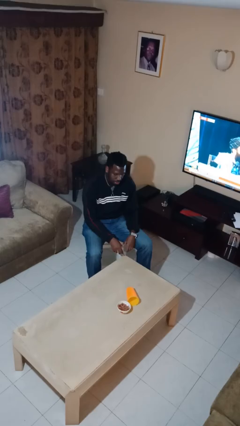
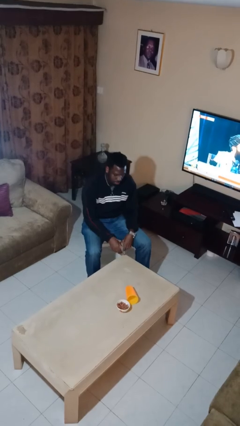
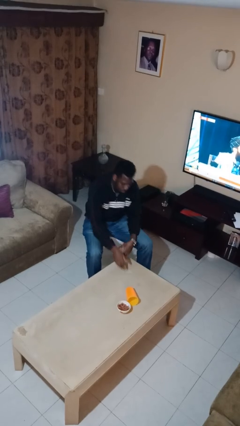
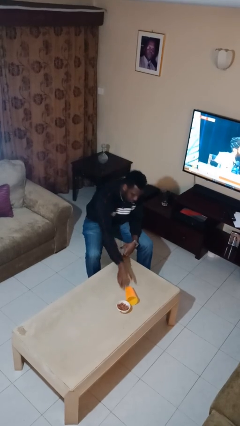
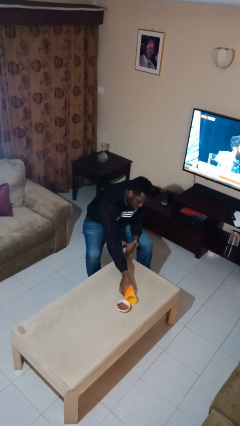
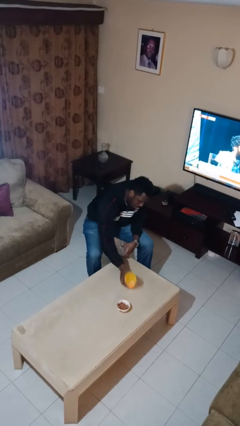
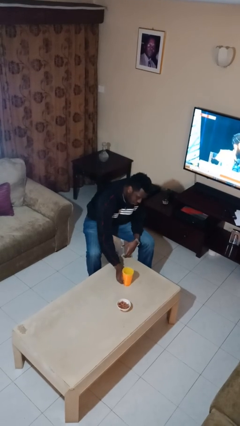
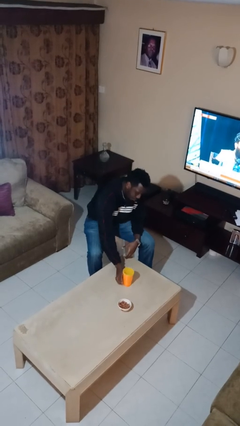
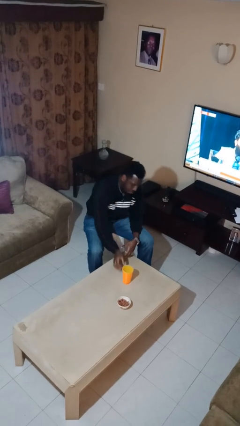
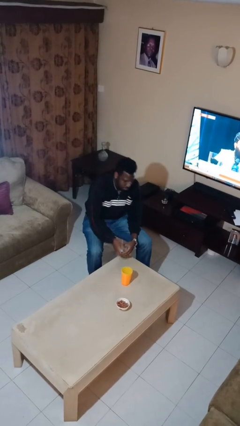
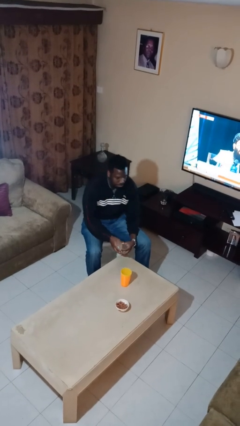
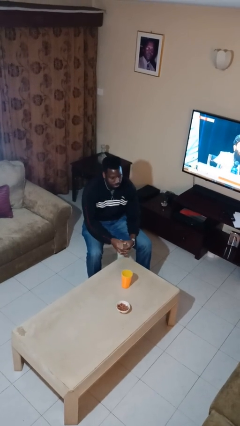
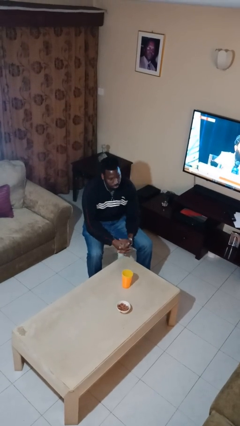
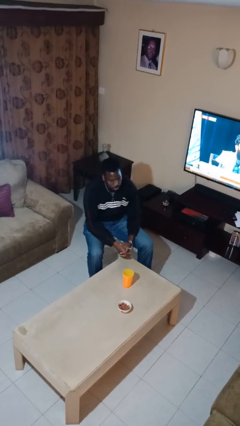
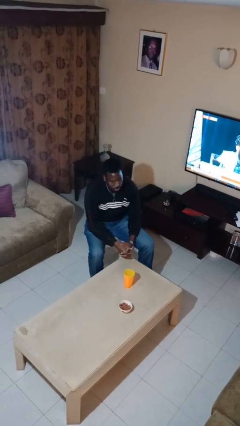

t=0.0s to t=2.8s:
person sets upright glass

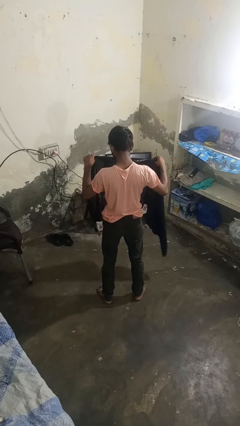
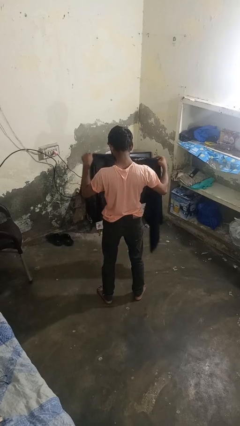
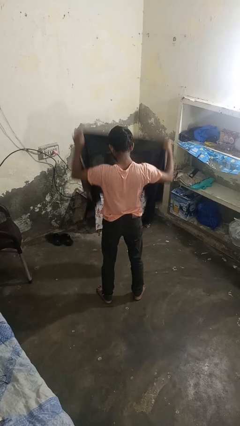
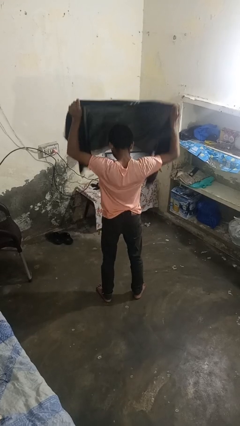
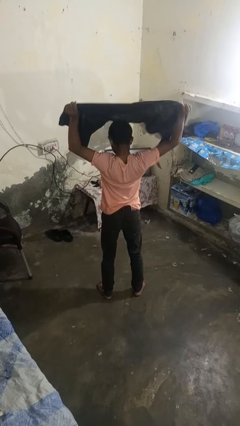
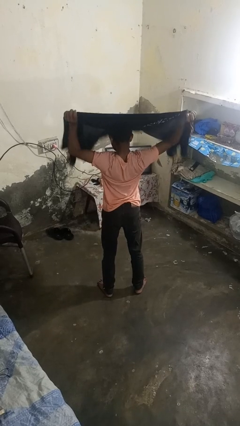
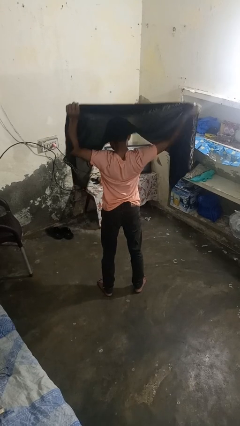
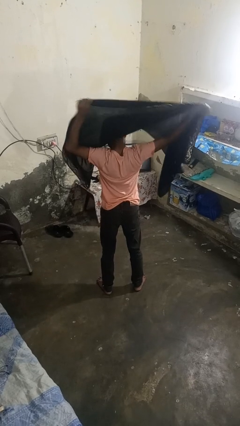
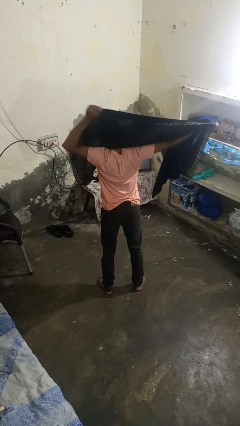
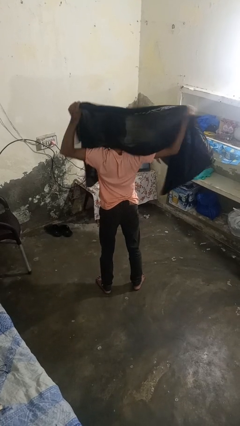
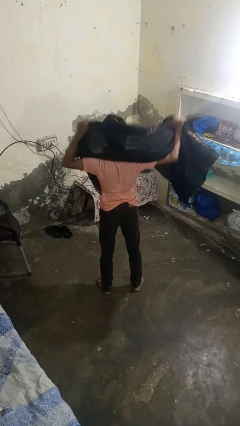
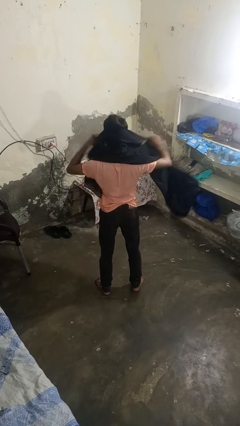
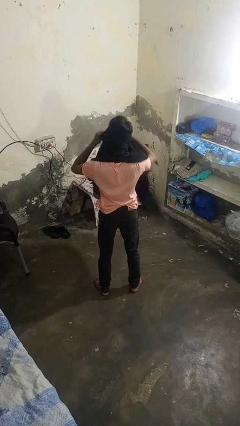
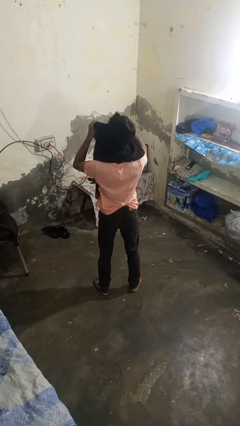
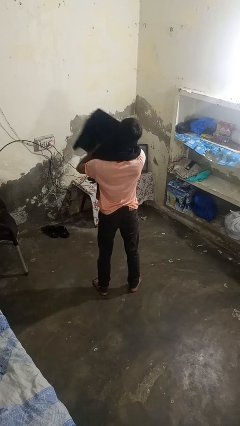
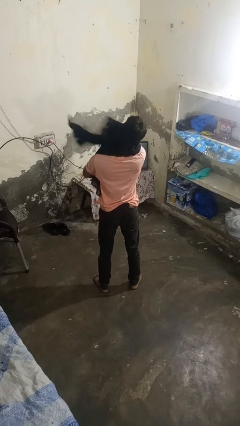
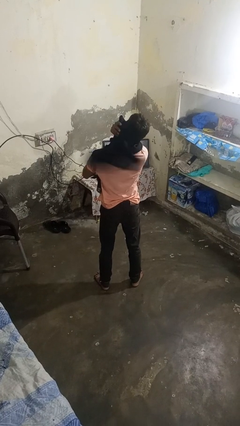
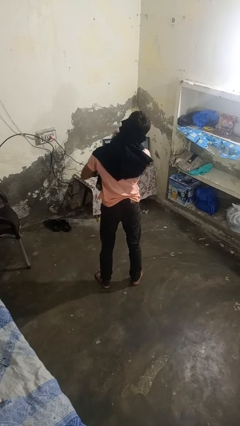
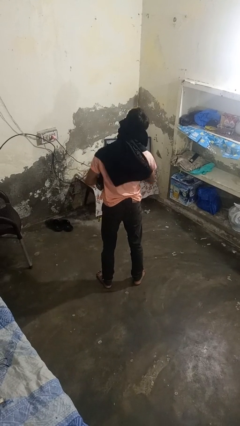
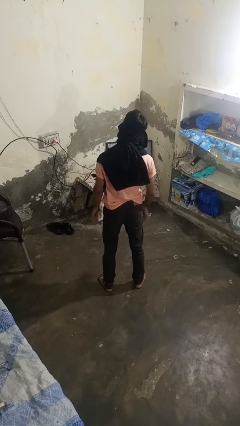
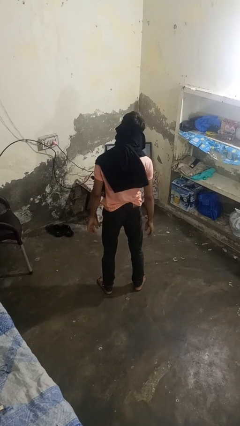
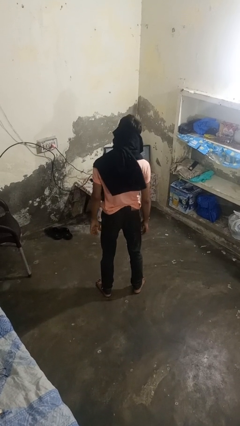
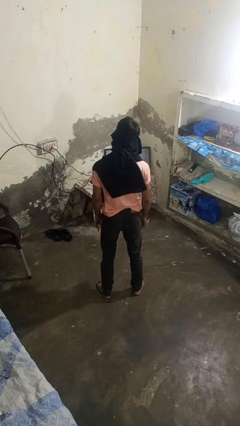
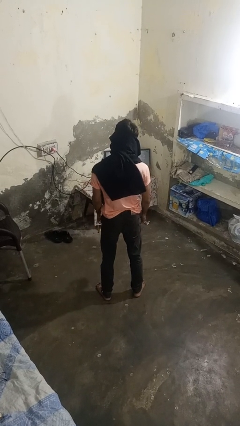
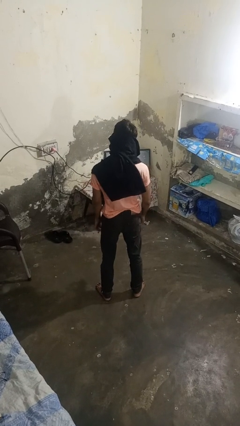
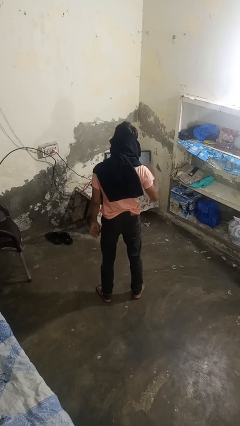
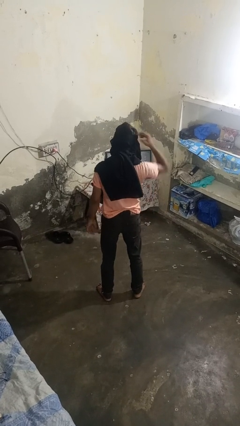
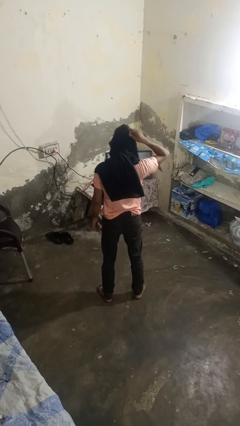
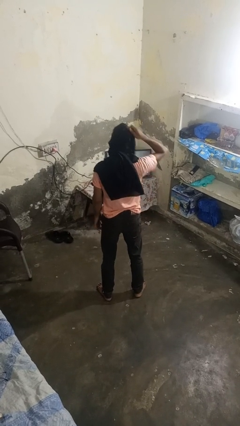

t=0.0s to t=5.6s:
person puts on scarf

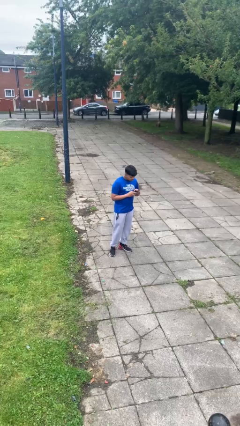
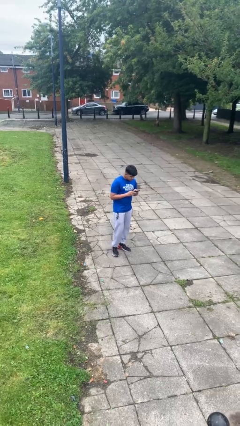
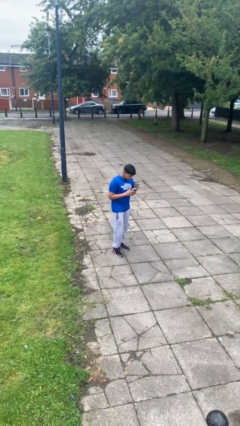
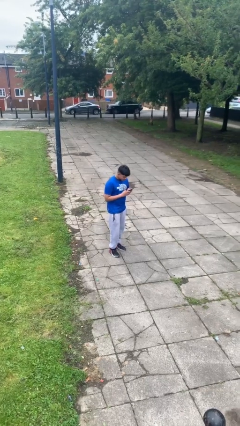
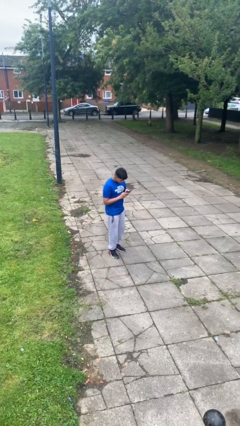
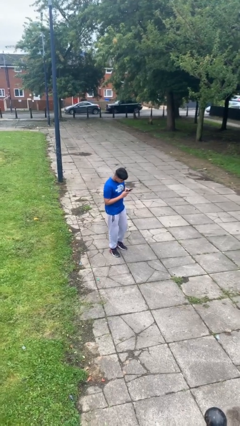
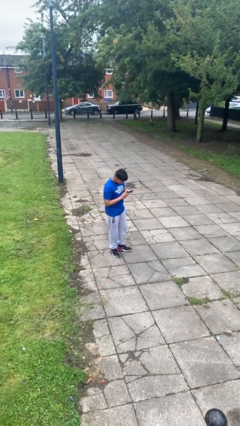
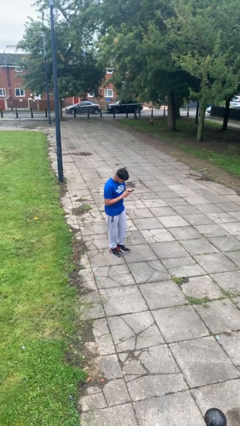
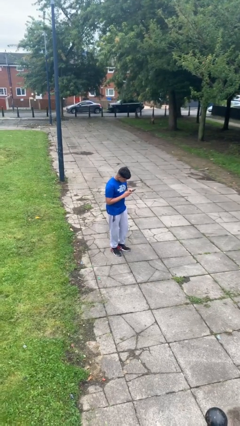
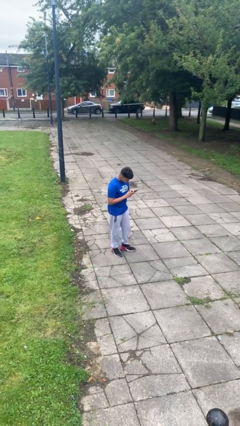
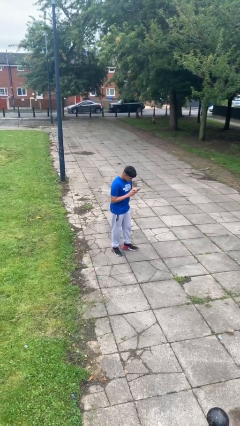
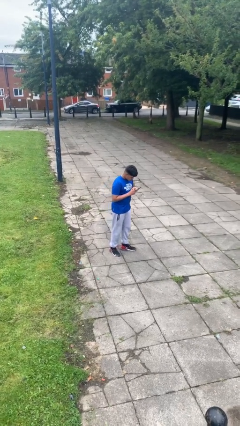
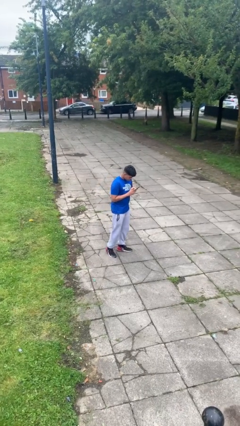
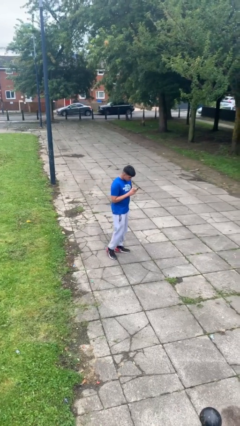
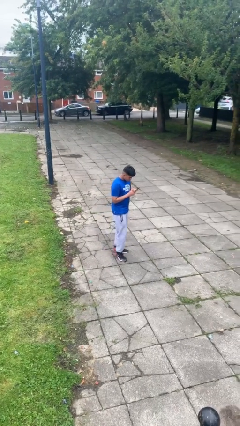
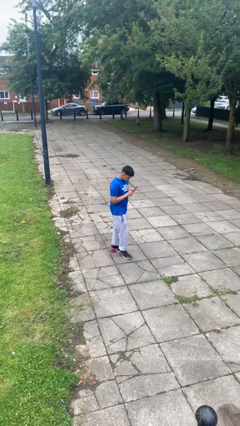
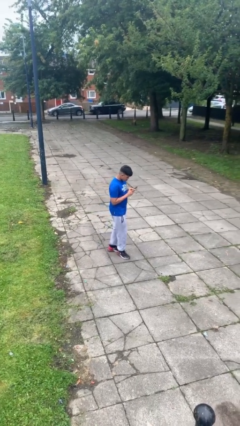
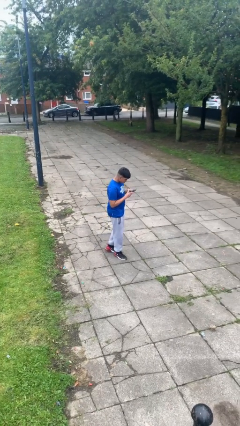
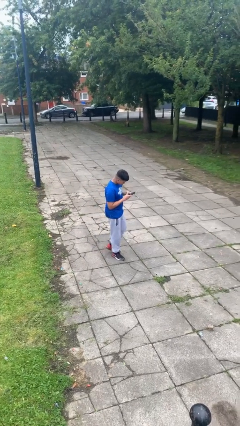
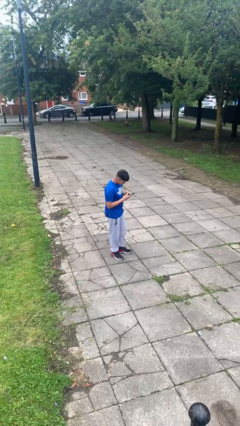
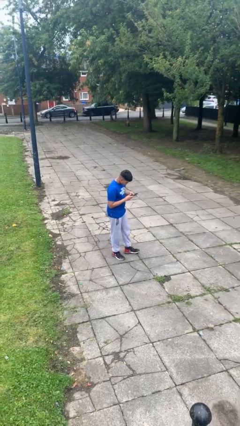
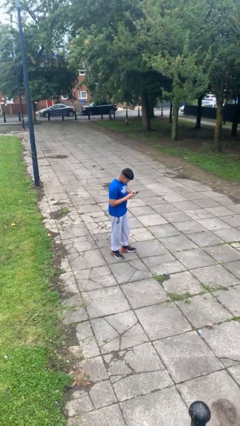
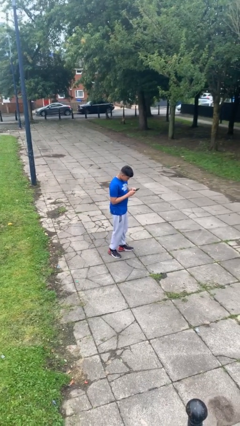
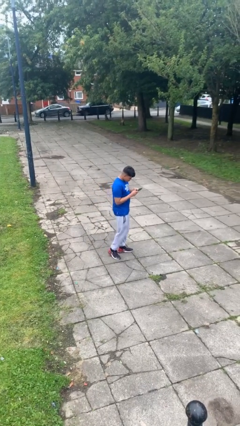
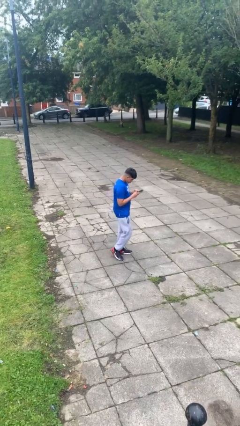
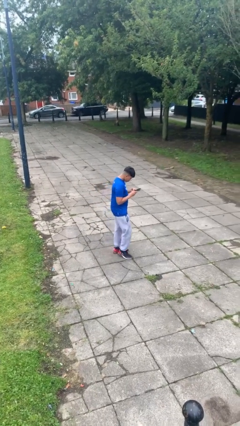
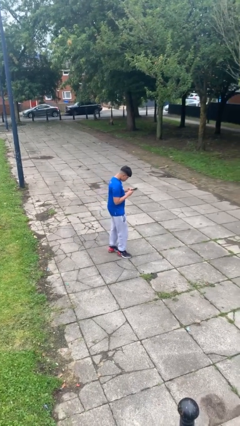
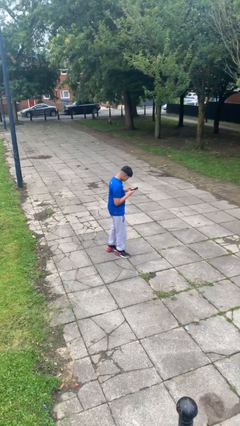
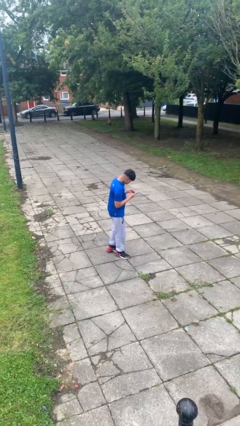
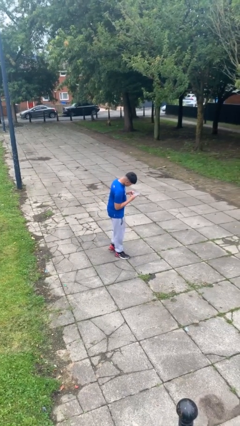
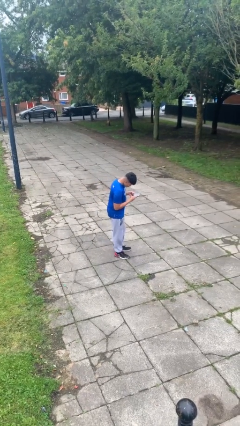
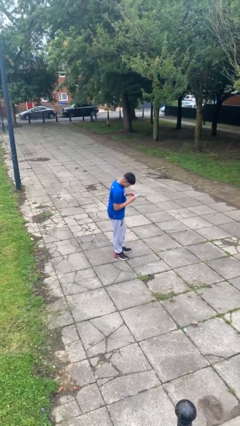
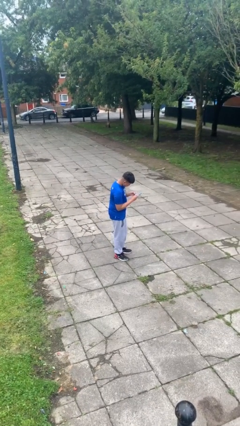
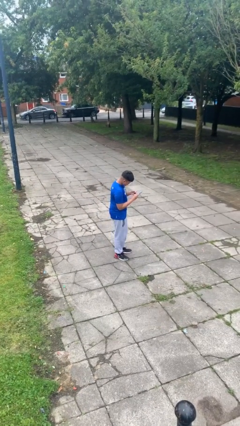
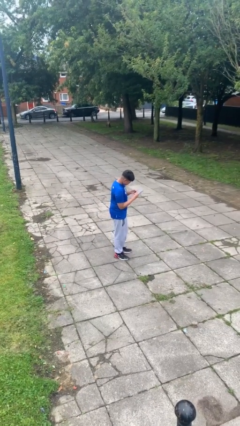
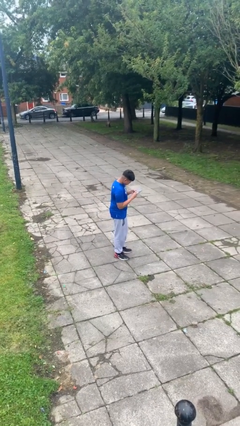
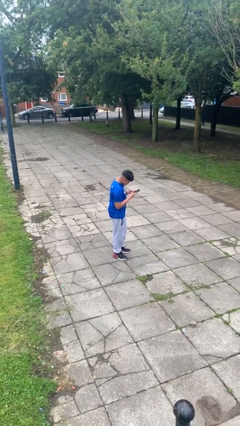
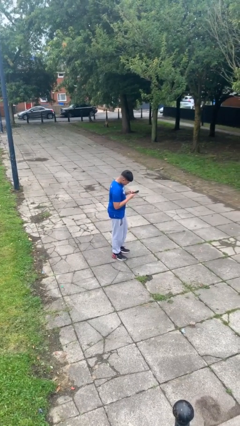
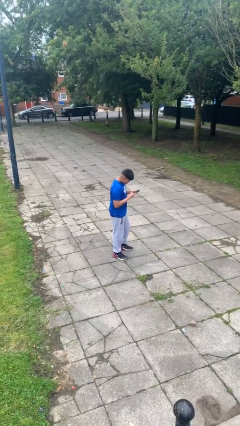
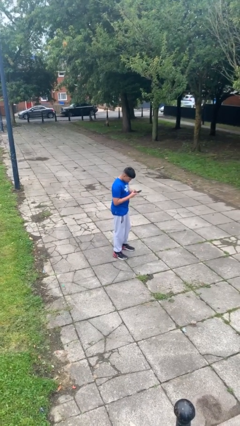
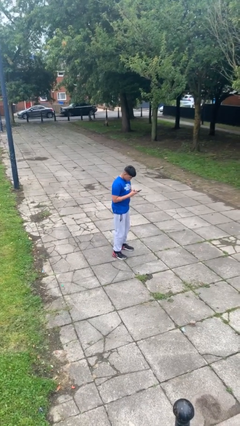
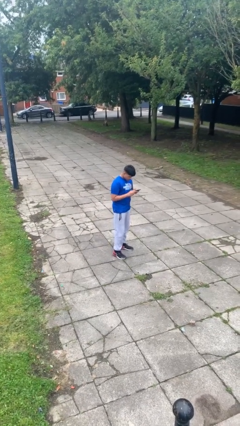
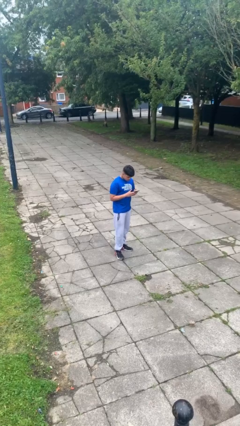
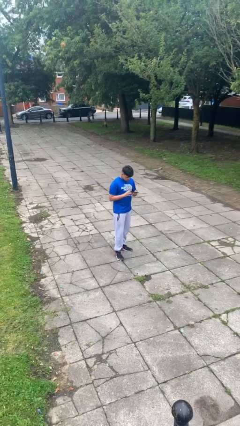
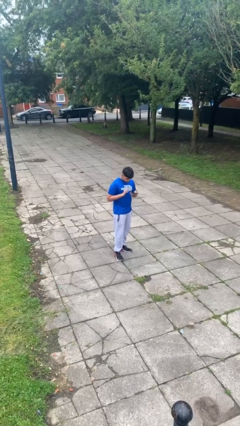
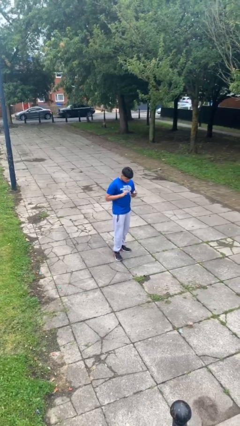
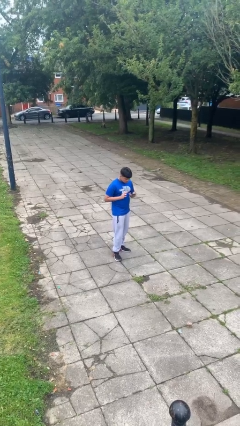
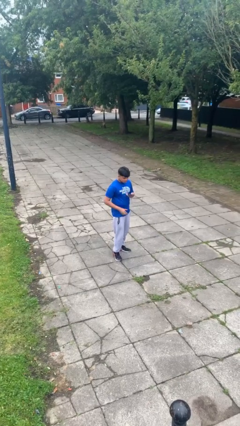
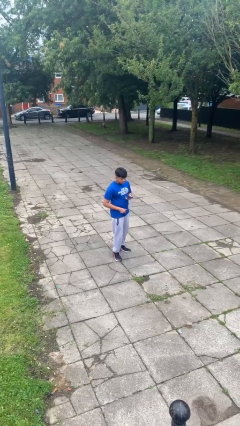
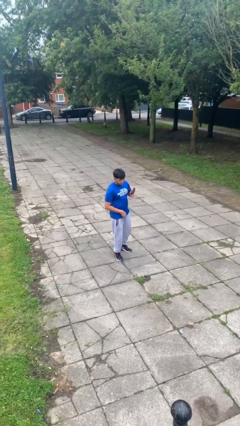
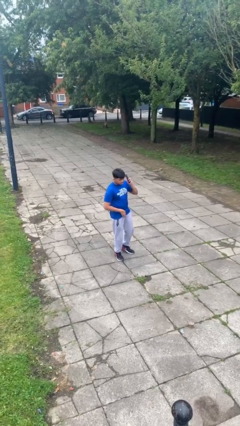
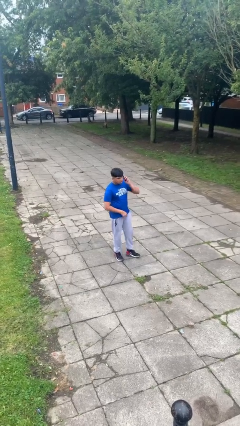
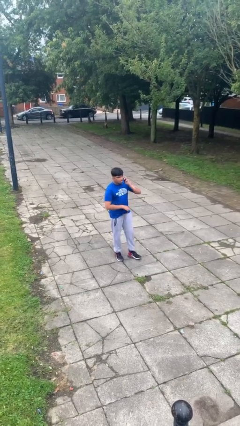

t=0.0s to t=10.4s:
person texts on phone
